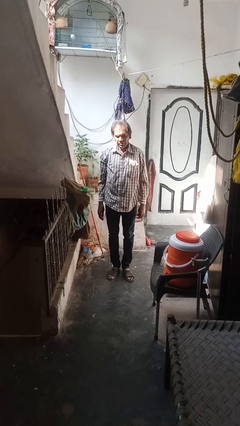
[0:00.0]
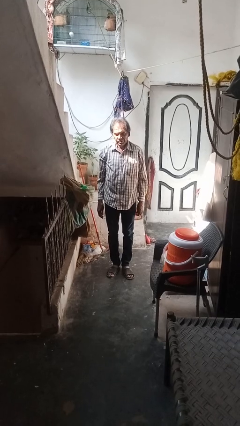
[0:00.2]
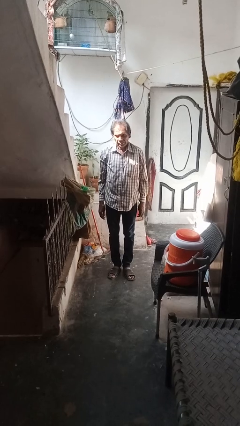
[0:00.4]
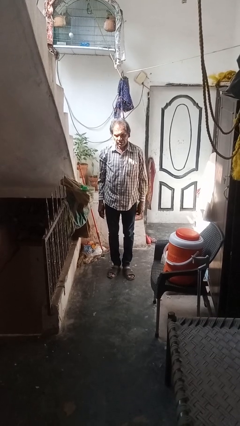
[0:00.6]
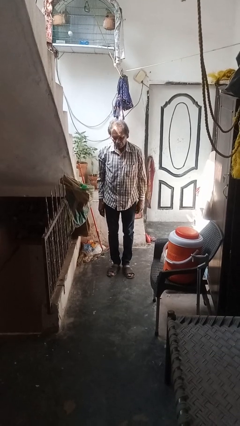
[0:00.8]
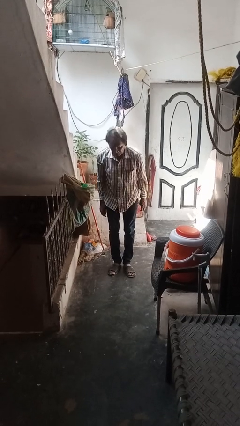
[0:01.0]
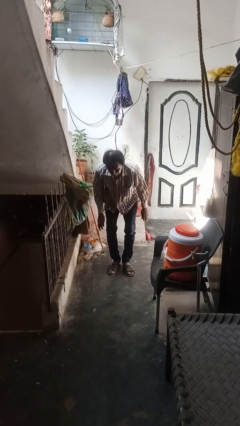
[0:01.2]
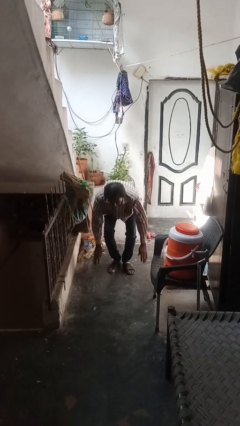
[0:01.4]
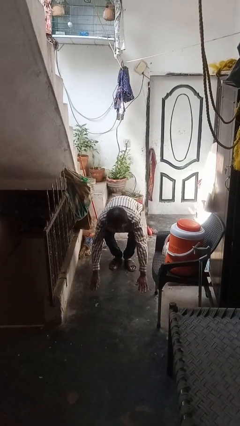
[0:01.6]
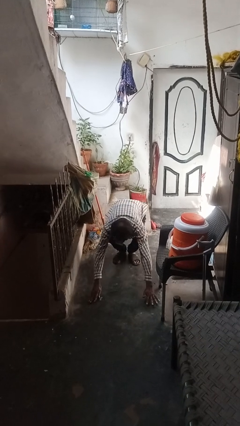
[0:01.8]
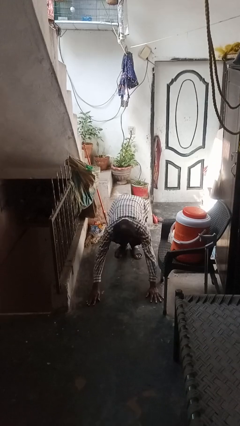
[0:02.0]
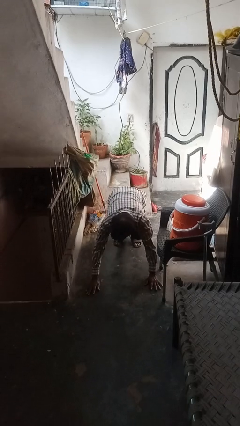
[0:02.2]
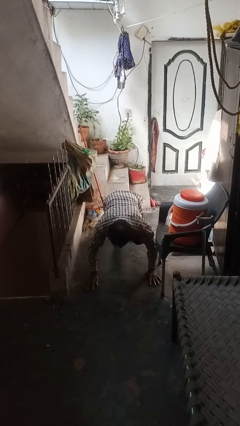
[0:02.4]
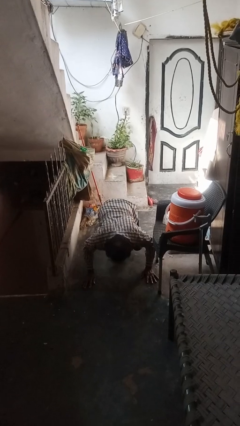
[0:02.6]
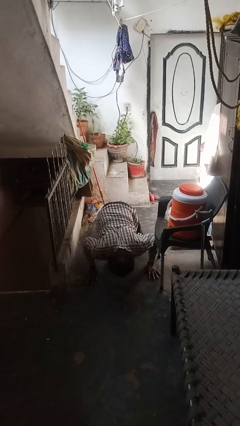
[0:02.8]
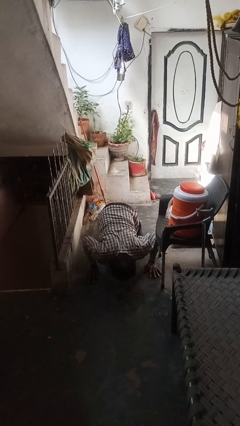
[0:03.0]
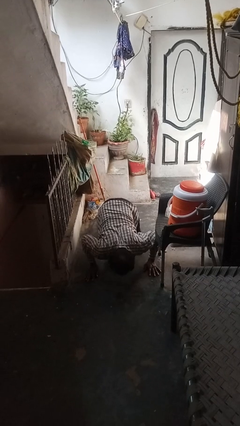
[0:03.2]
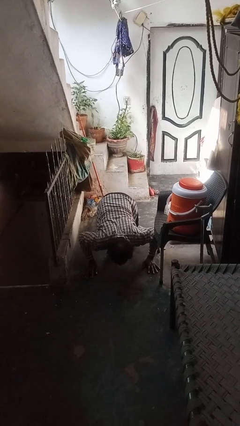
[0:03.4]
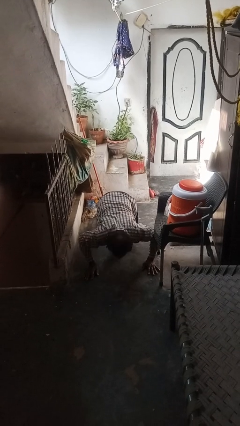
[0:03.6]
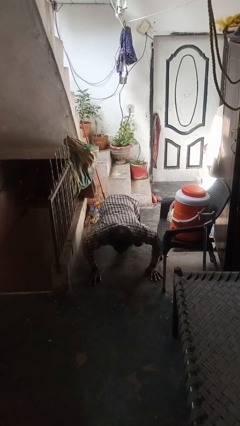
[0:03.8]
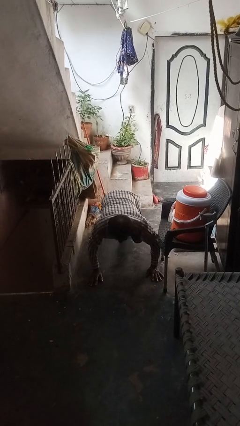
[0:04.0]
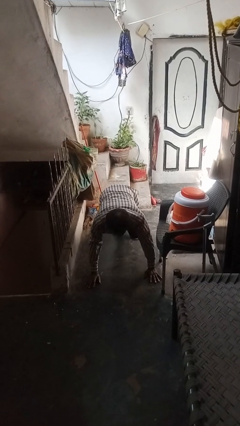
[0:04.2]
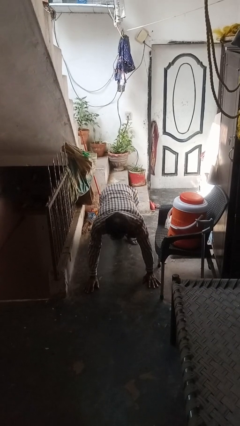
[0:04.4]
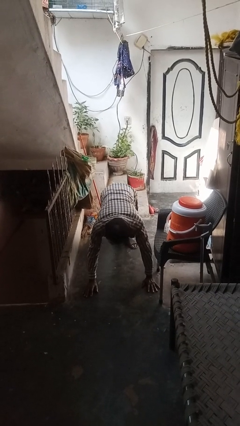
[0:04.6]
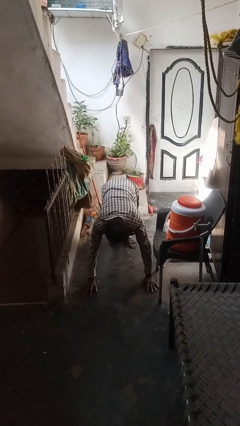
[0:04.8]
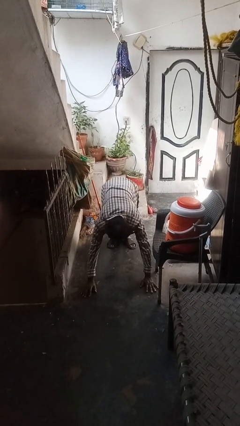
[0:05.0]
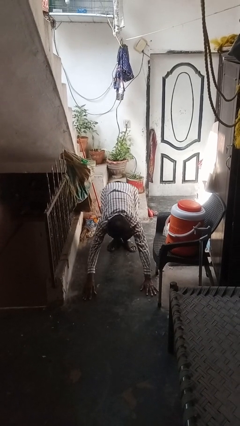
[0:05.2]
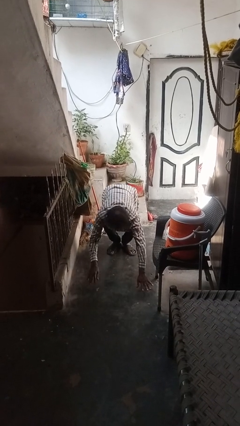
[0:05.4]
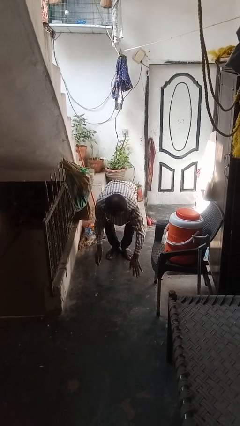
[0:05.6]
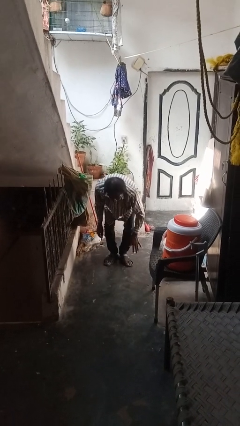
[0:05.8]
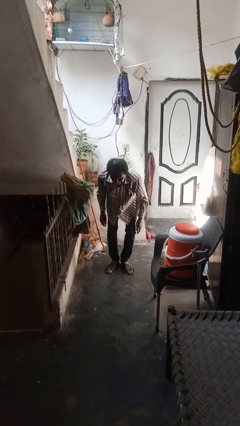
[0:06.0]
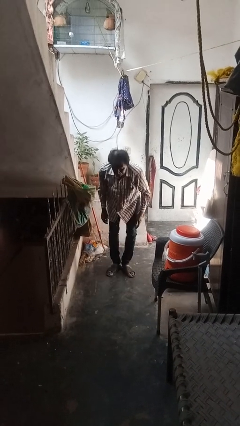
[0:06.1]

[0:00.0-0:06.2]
person exercises with pushup

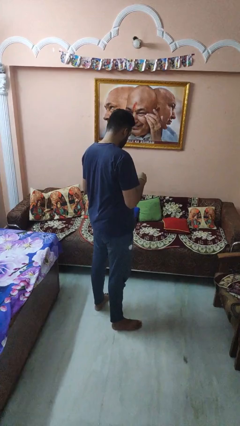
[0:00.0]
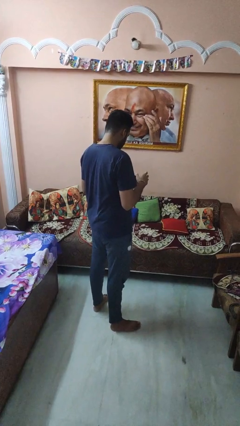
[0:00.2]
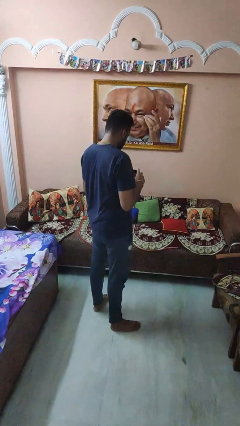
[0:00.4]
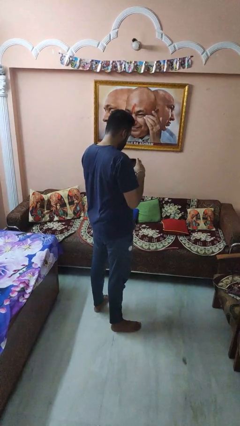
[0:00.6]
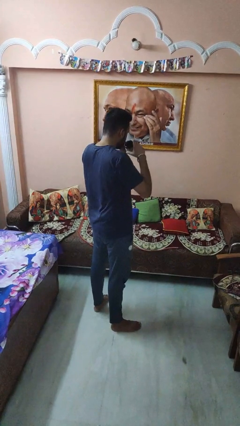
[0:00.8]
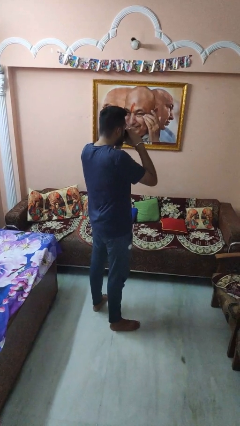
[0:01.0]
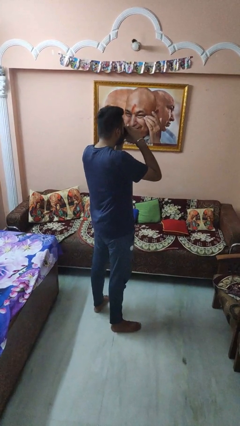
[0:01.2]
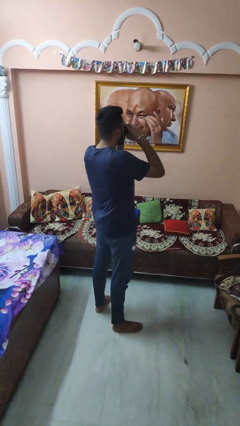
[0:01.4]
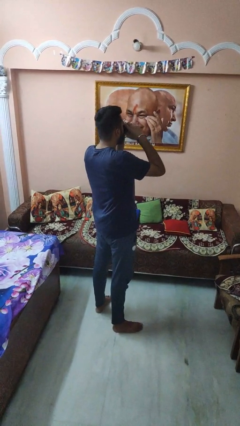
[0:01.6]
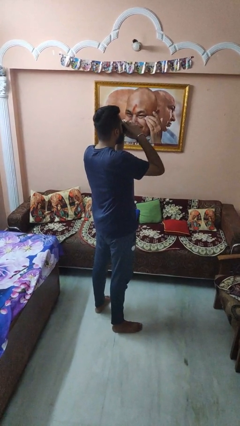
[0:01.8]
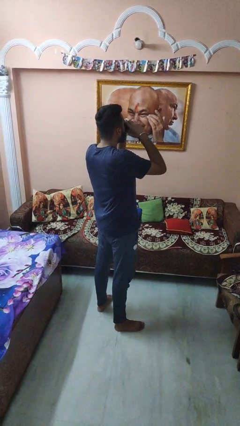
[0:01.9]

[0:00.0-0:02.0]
person drinks from mug

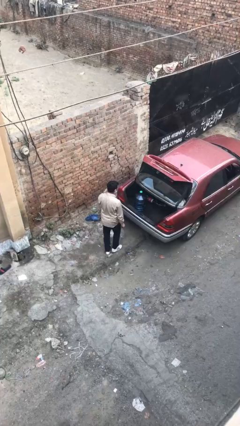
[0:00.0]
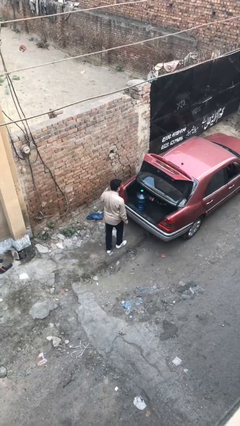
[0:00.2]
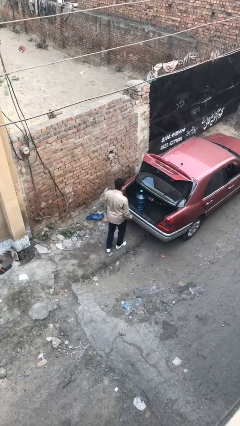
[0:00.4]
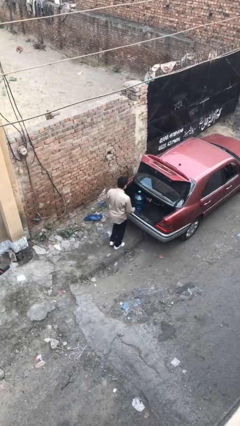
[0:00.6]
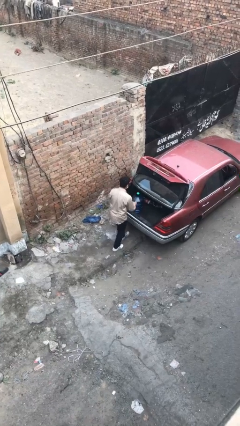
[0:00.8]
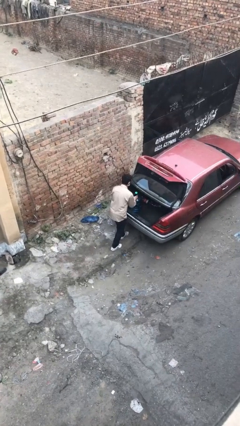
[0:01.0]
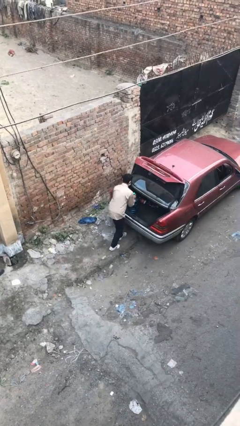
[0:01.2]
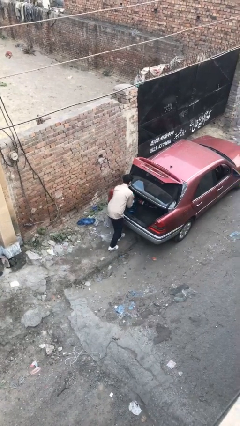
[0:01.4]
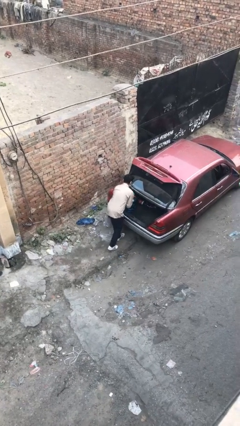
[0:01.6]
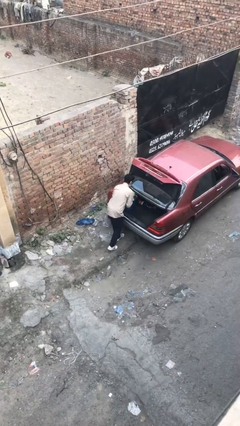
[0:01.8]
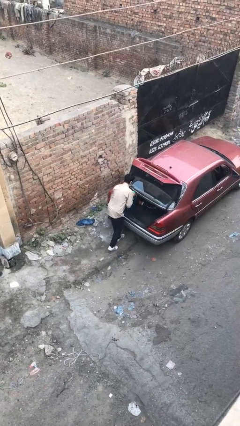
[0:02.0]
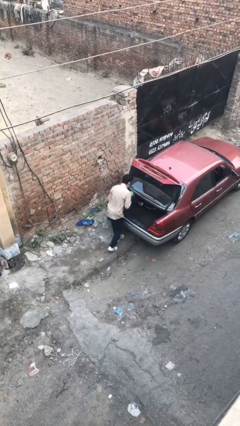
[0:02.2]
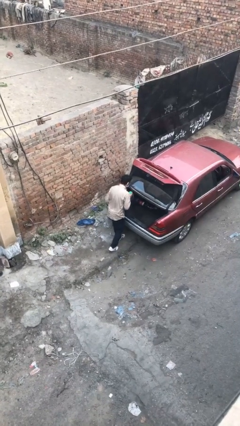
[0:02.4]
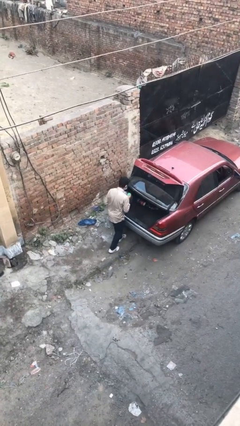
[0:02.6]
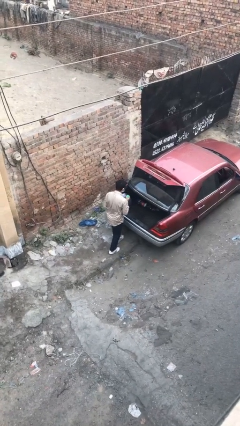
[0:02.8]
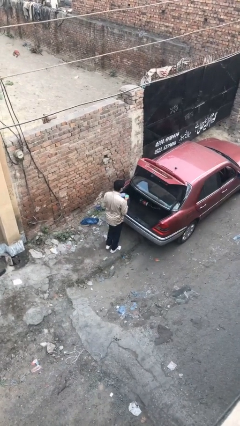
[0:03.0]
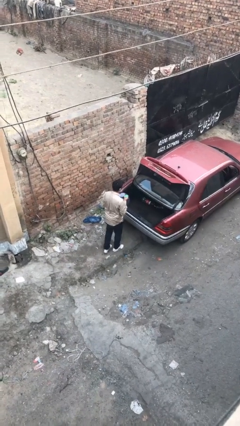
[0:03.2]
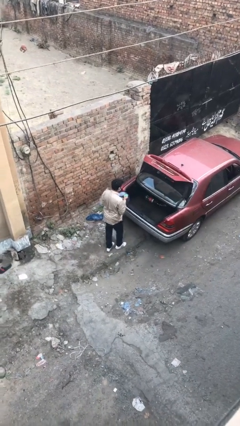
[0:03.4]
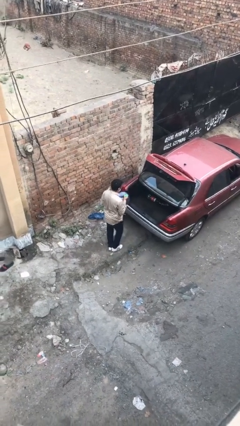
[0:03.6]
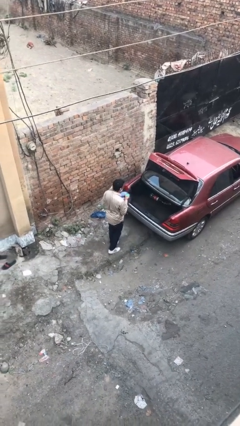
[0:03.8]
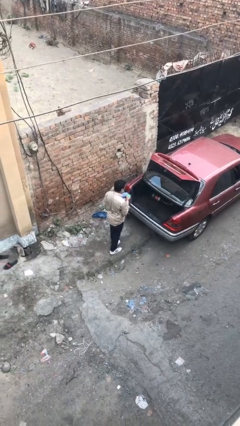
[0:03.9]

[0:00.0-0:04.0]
person unloads car

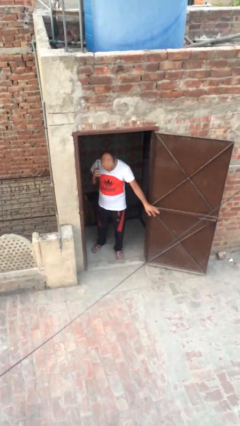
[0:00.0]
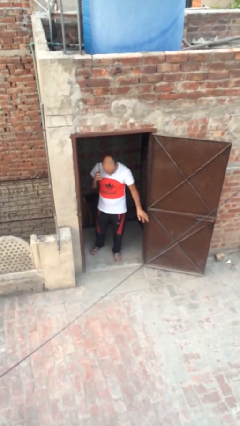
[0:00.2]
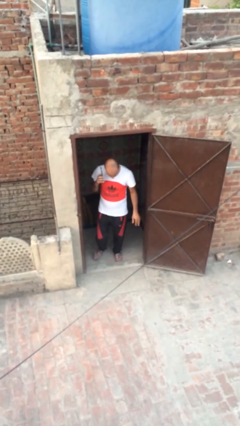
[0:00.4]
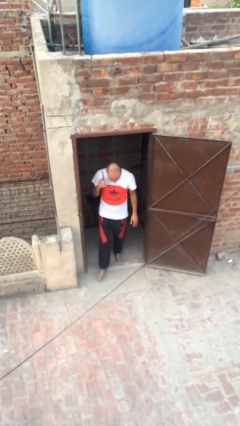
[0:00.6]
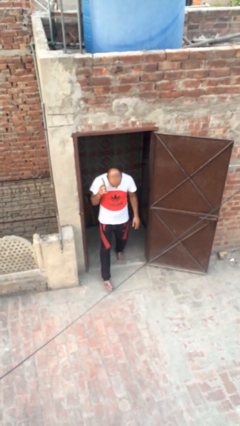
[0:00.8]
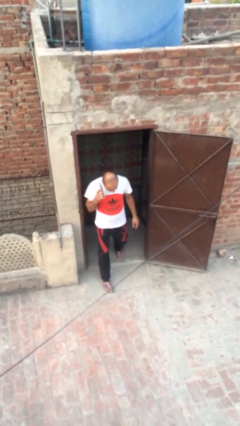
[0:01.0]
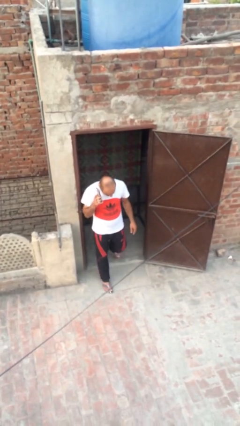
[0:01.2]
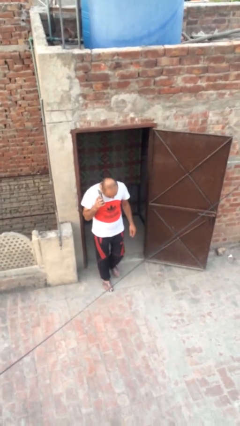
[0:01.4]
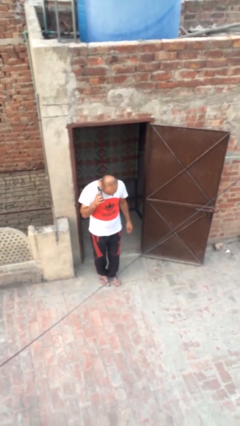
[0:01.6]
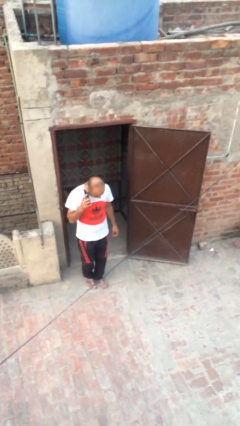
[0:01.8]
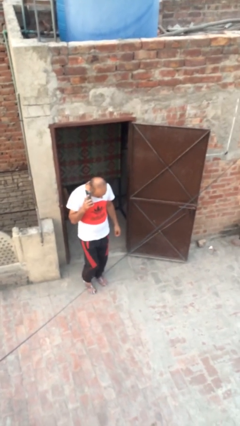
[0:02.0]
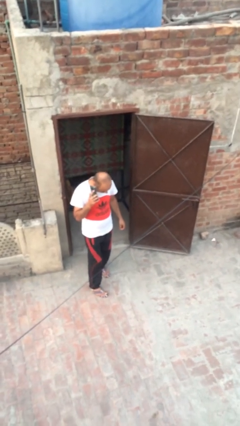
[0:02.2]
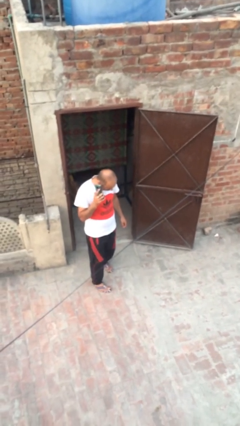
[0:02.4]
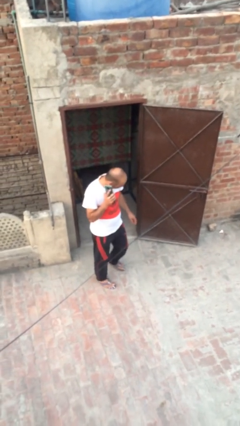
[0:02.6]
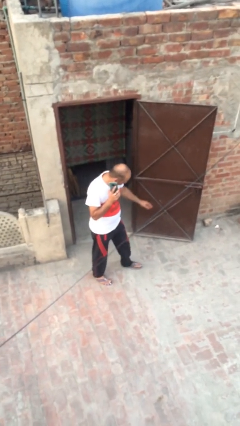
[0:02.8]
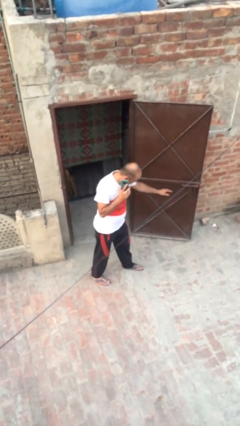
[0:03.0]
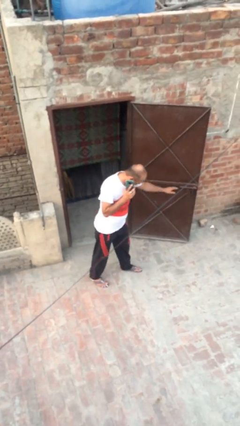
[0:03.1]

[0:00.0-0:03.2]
person enters scene through structure

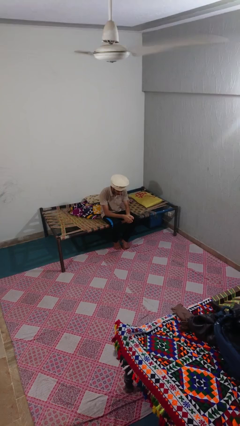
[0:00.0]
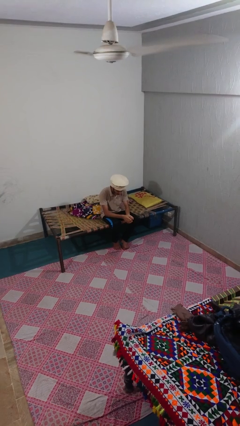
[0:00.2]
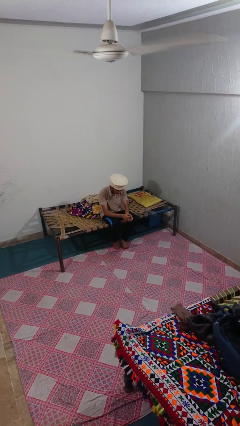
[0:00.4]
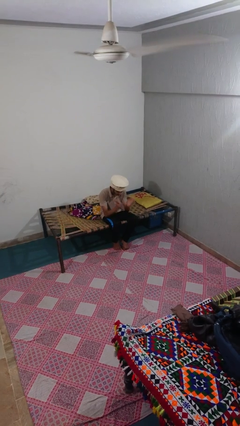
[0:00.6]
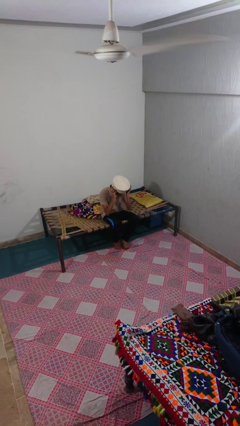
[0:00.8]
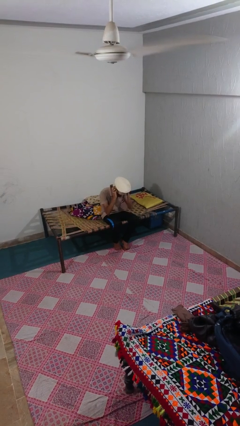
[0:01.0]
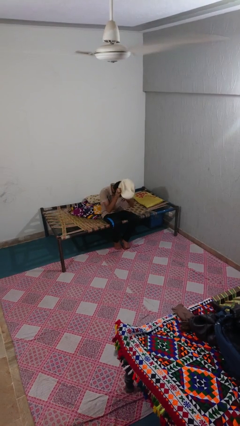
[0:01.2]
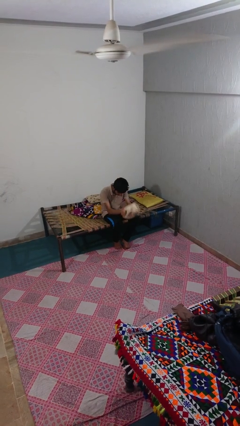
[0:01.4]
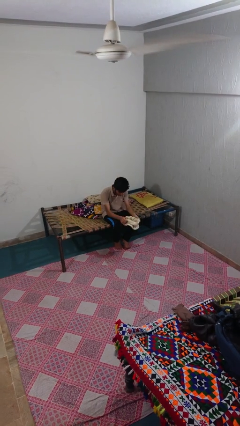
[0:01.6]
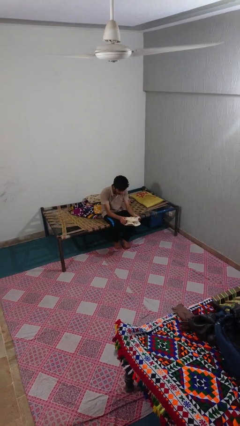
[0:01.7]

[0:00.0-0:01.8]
person takes off hat

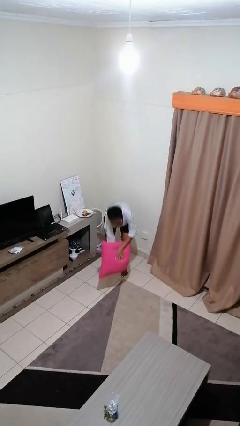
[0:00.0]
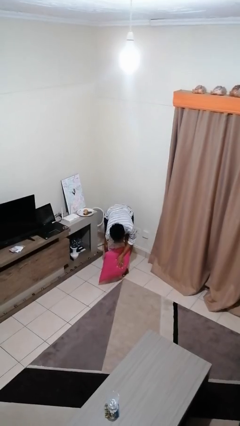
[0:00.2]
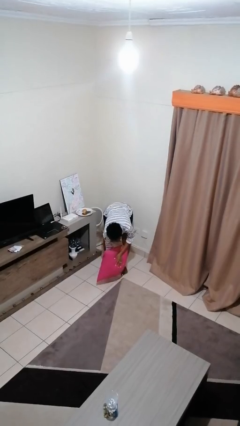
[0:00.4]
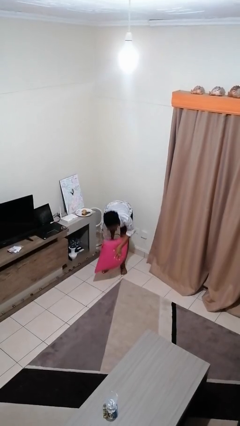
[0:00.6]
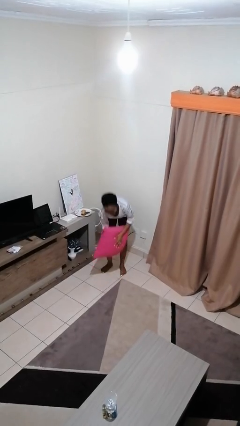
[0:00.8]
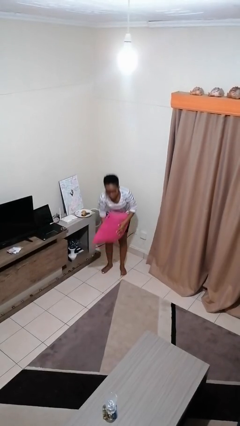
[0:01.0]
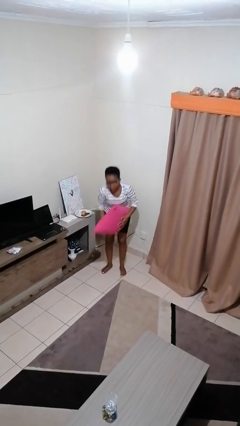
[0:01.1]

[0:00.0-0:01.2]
person catches dropped object
